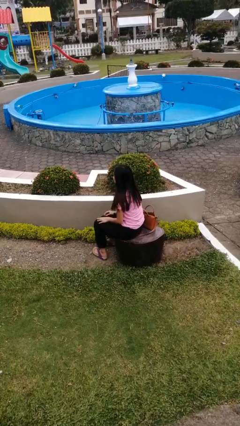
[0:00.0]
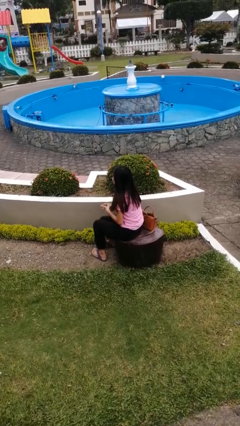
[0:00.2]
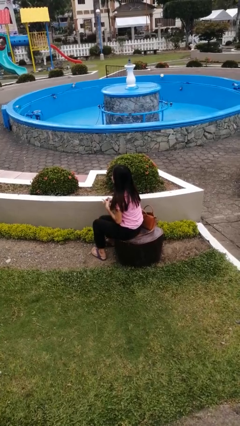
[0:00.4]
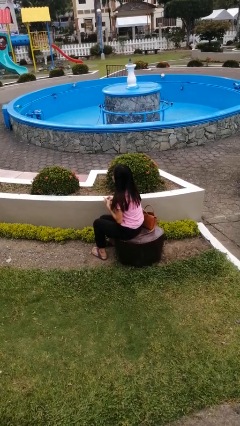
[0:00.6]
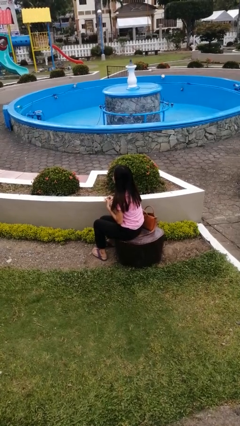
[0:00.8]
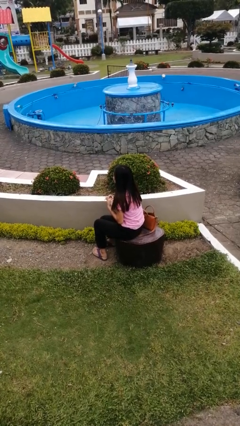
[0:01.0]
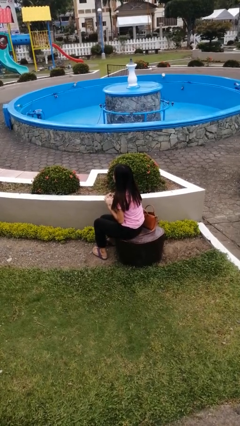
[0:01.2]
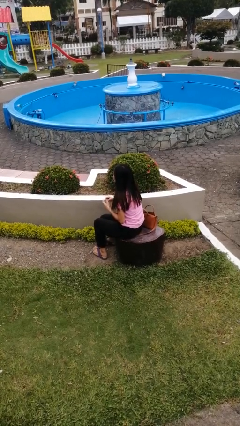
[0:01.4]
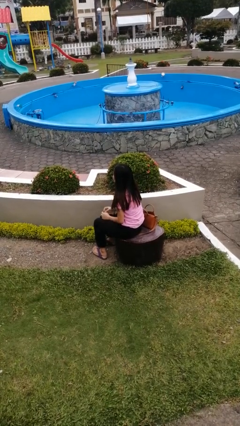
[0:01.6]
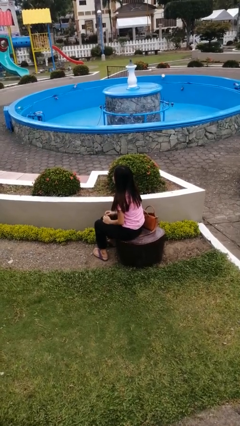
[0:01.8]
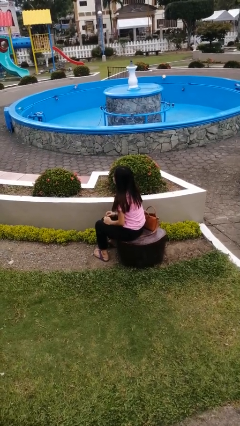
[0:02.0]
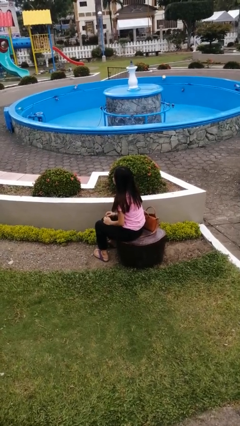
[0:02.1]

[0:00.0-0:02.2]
person takes off ring

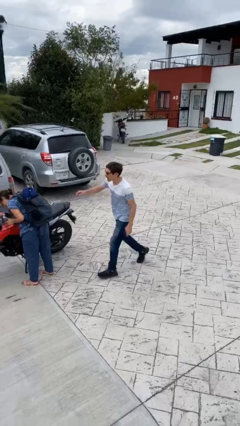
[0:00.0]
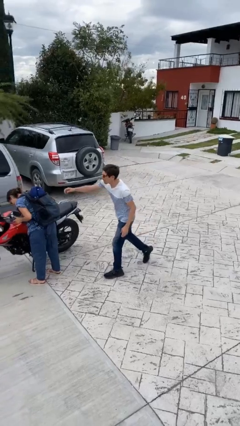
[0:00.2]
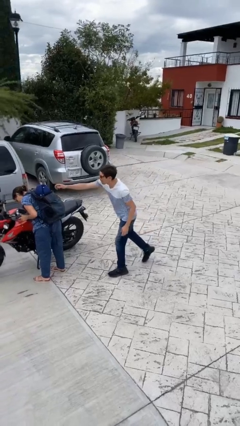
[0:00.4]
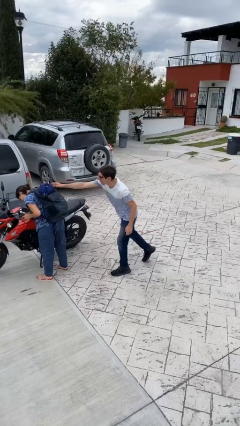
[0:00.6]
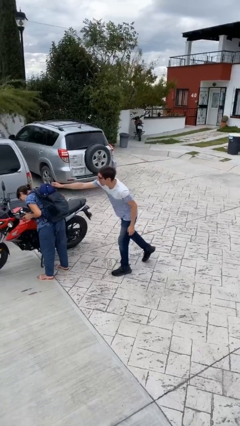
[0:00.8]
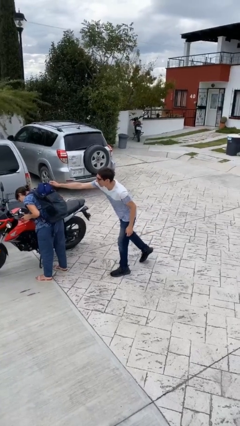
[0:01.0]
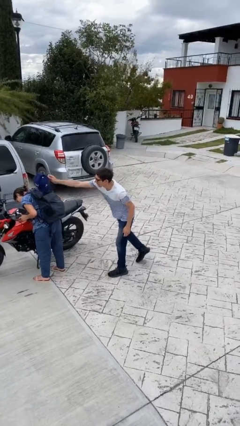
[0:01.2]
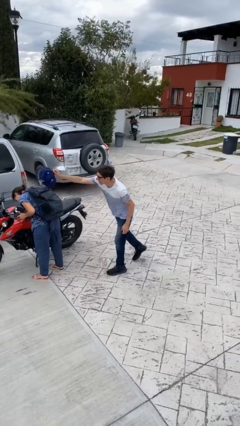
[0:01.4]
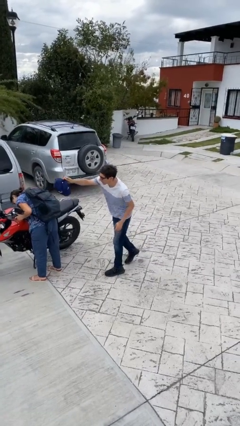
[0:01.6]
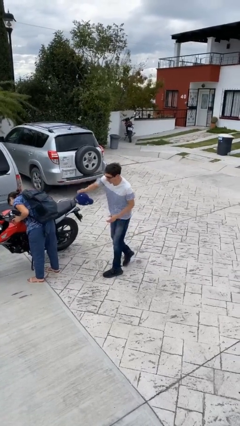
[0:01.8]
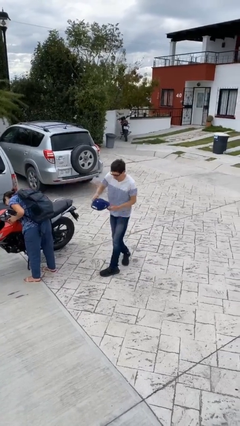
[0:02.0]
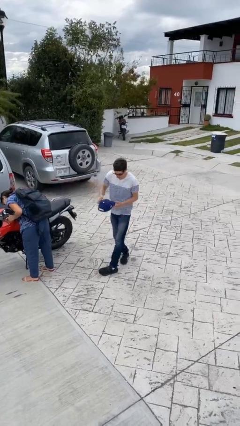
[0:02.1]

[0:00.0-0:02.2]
person steals object from person

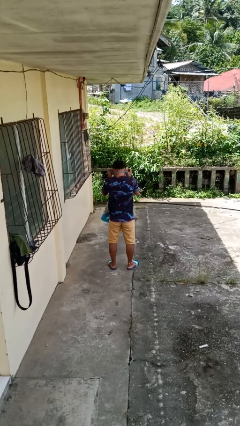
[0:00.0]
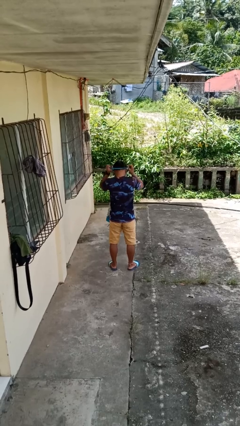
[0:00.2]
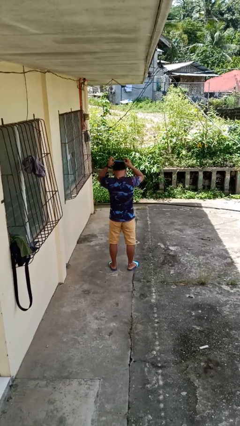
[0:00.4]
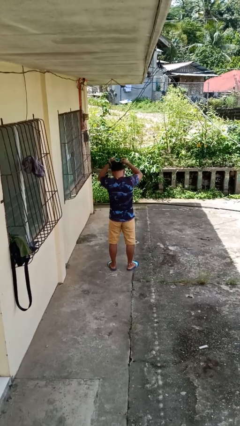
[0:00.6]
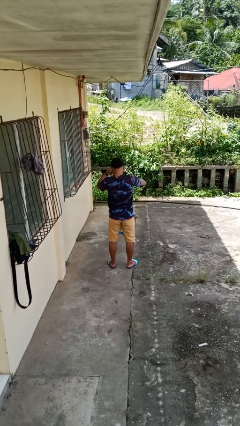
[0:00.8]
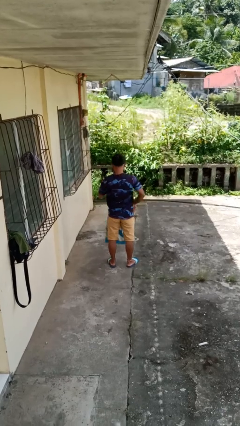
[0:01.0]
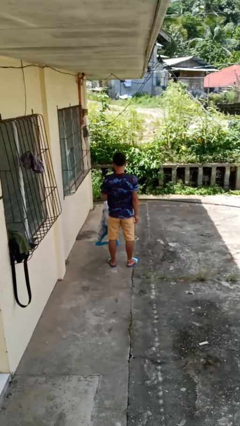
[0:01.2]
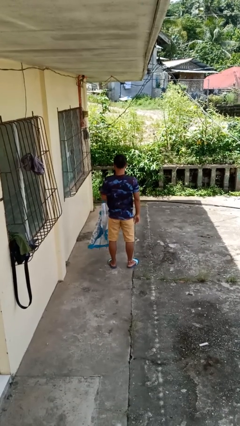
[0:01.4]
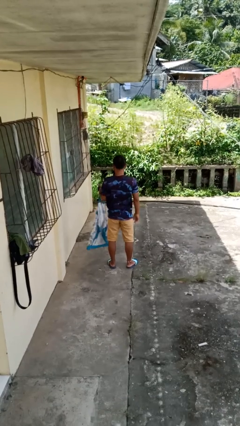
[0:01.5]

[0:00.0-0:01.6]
person takes off apron

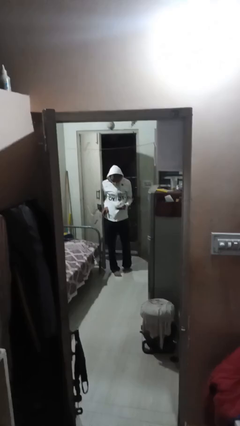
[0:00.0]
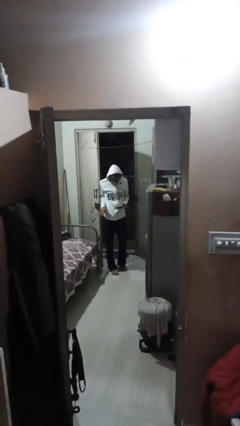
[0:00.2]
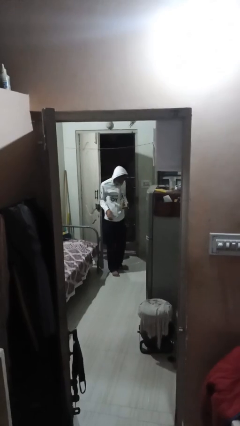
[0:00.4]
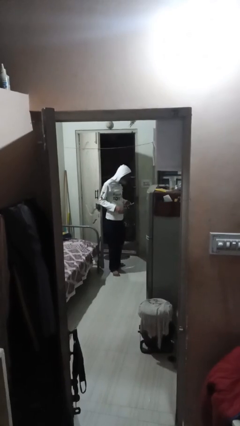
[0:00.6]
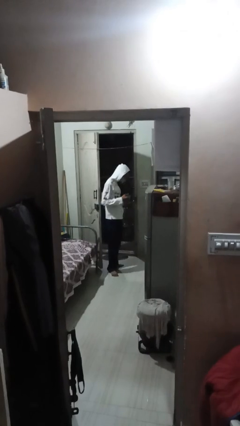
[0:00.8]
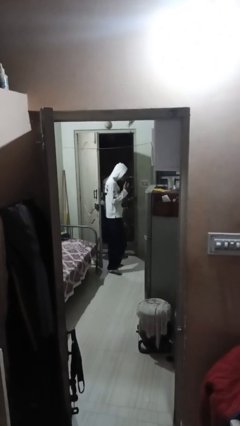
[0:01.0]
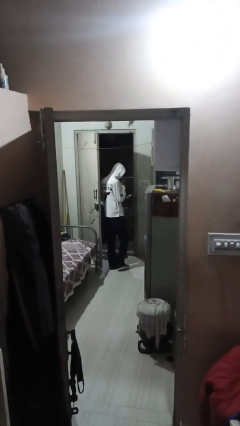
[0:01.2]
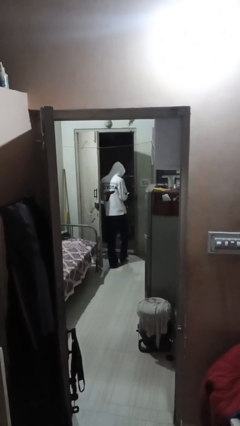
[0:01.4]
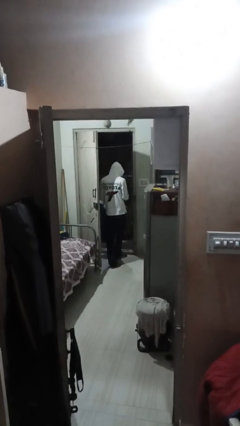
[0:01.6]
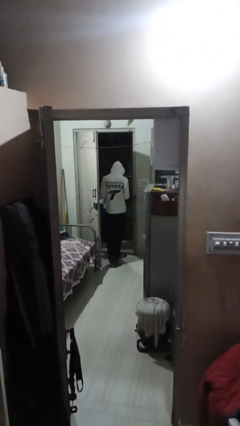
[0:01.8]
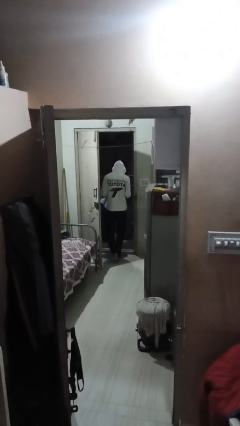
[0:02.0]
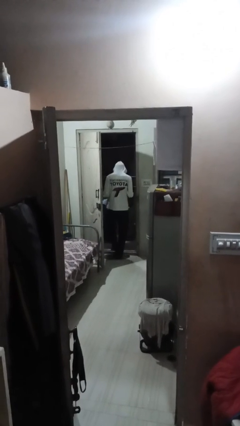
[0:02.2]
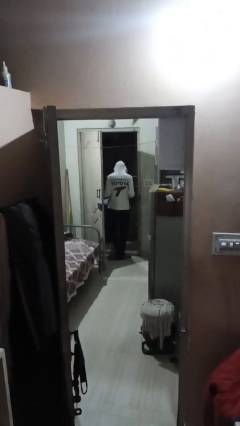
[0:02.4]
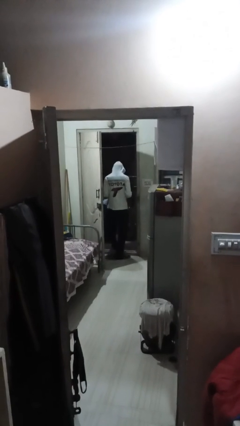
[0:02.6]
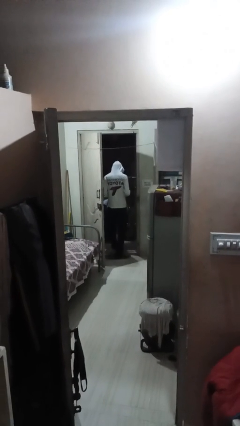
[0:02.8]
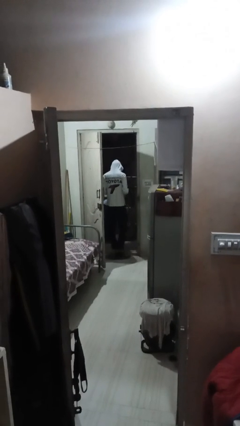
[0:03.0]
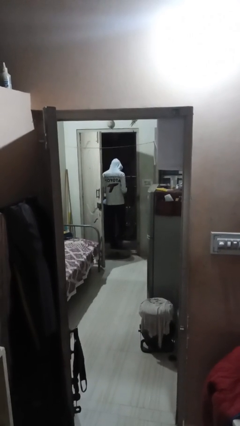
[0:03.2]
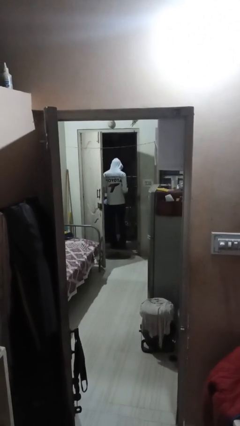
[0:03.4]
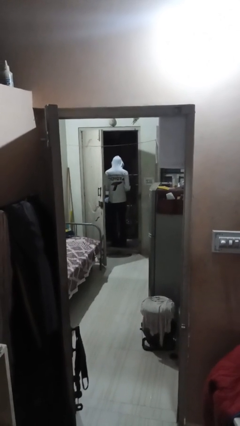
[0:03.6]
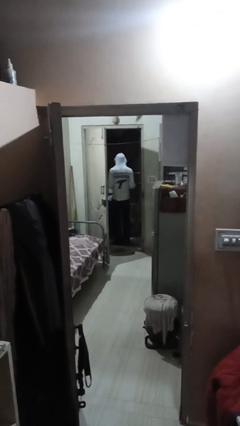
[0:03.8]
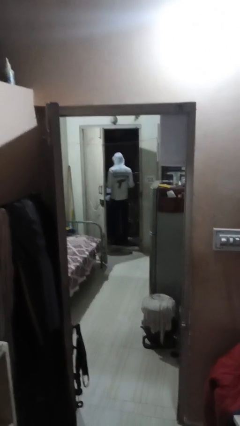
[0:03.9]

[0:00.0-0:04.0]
person exits scene through structure

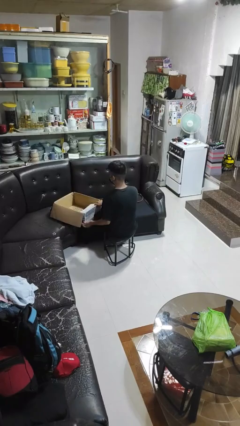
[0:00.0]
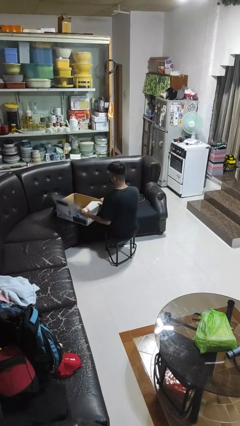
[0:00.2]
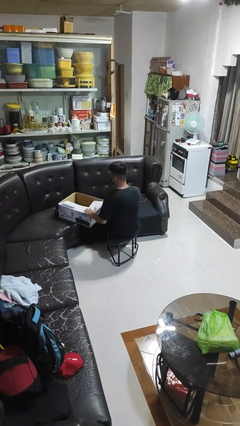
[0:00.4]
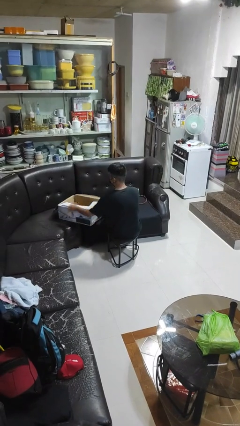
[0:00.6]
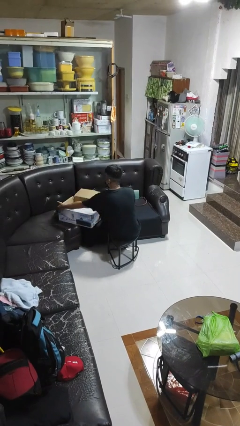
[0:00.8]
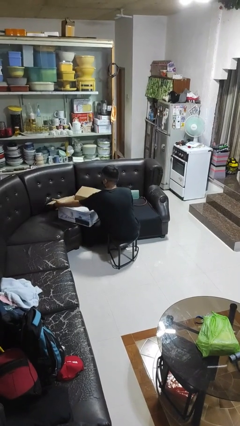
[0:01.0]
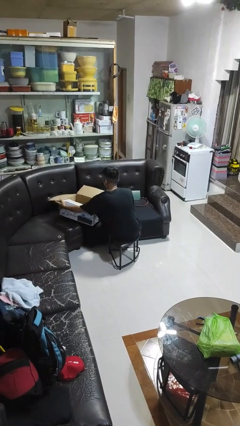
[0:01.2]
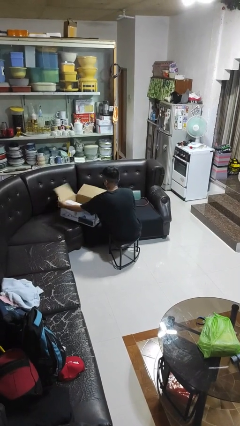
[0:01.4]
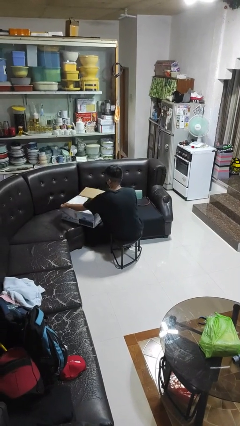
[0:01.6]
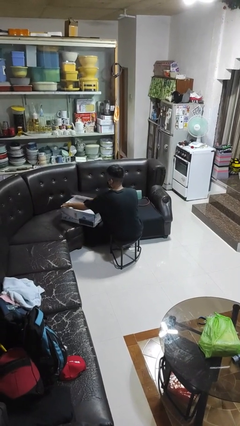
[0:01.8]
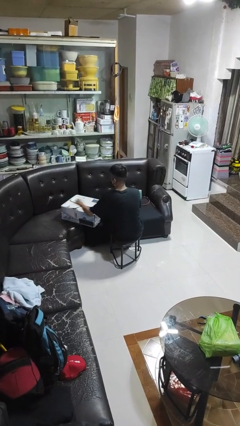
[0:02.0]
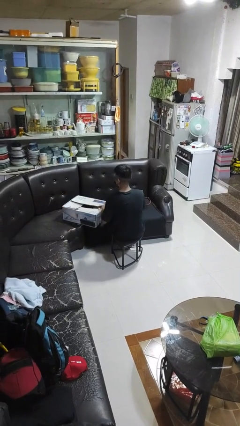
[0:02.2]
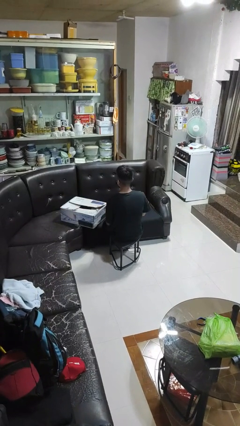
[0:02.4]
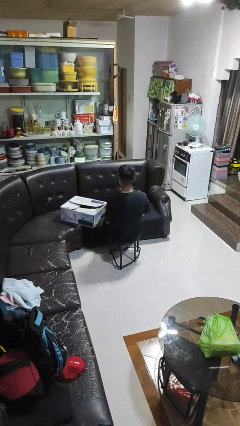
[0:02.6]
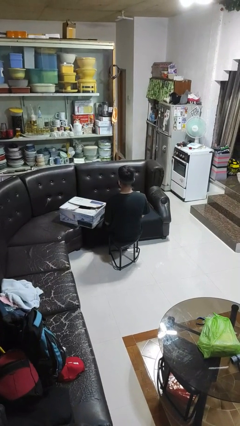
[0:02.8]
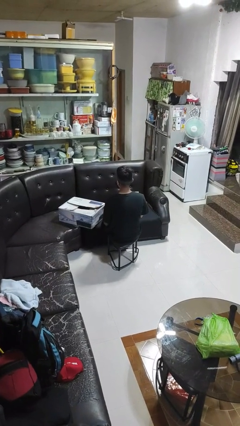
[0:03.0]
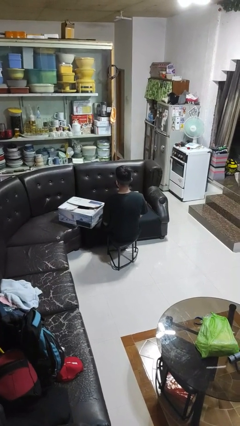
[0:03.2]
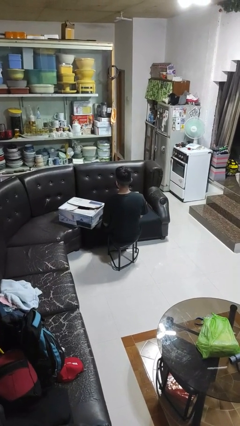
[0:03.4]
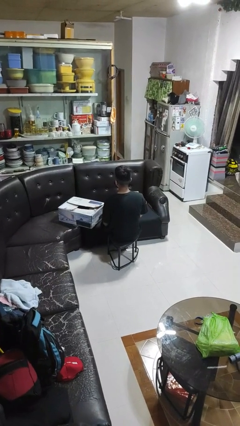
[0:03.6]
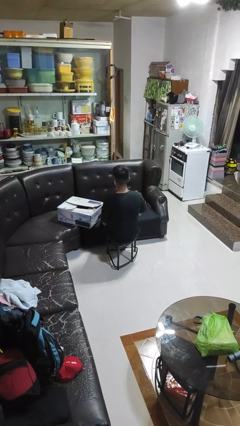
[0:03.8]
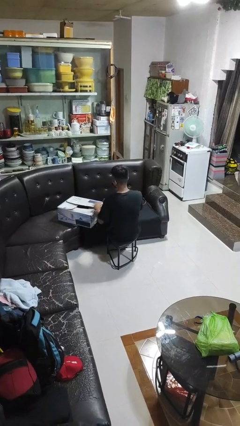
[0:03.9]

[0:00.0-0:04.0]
person closes box

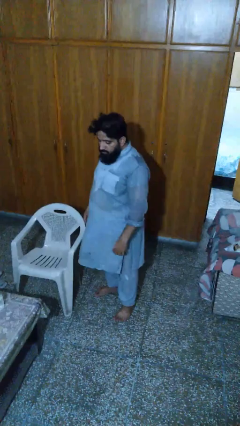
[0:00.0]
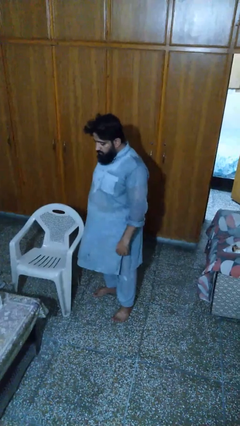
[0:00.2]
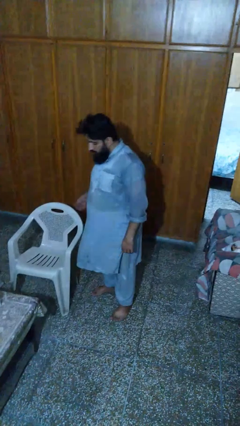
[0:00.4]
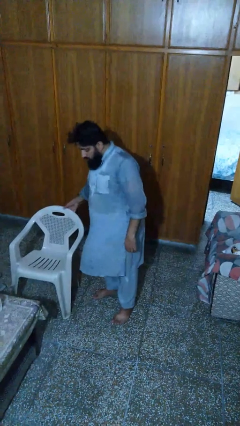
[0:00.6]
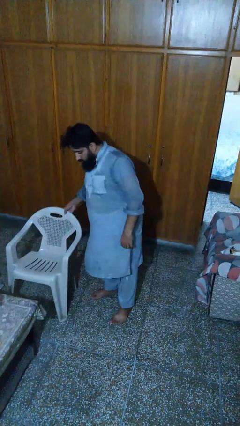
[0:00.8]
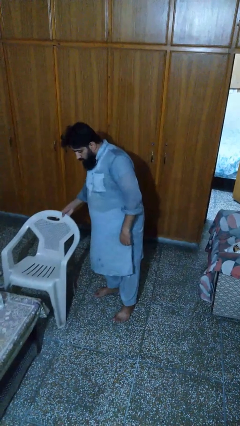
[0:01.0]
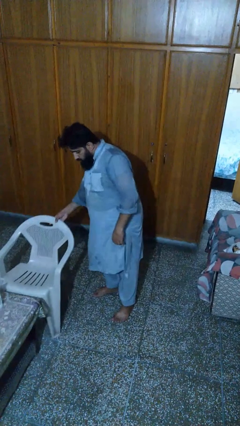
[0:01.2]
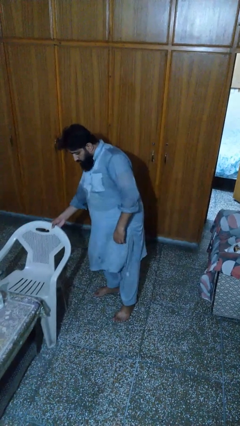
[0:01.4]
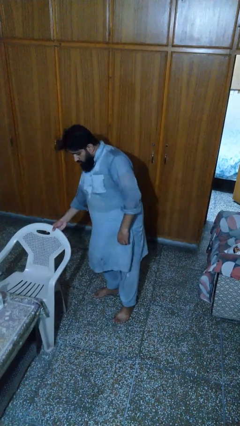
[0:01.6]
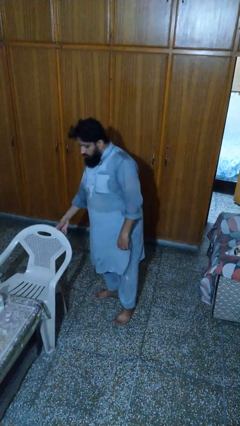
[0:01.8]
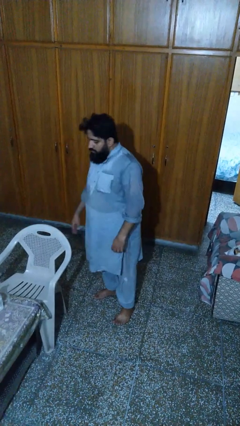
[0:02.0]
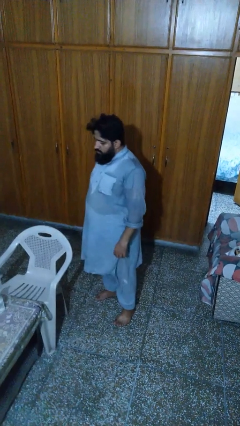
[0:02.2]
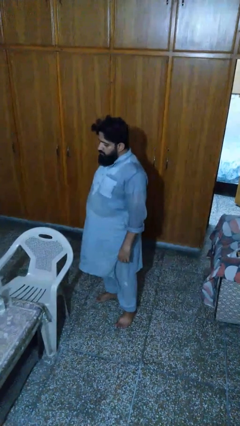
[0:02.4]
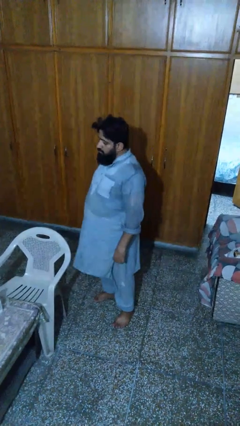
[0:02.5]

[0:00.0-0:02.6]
person pushes in chair

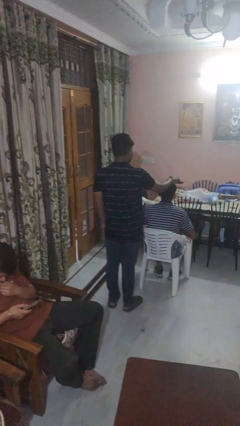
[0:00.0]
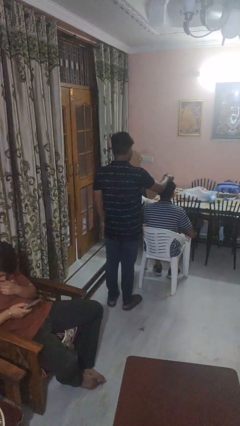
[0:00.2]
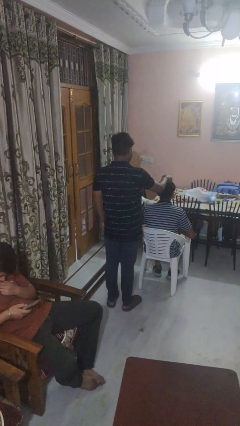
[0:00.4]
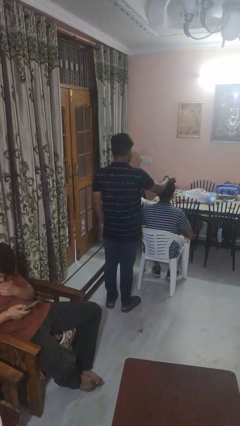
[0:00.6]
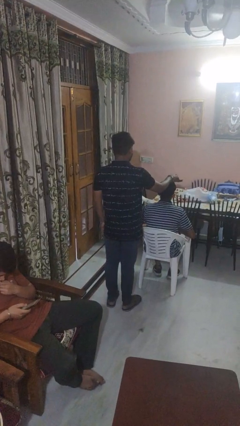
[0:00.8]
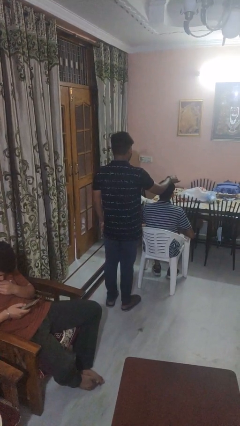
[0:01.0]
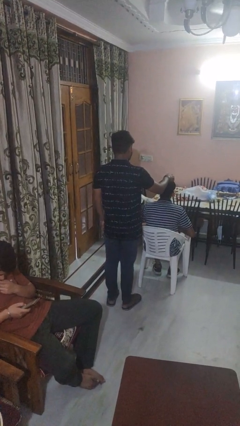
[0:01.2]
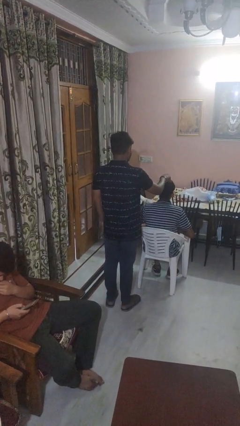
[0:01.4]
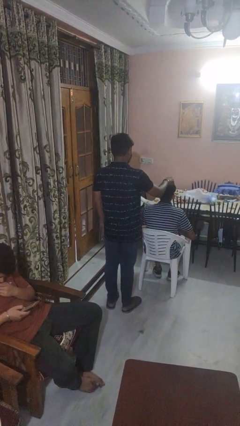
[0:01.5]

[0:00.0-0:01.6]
person brushes hair of person
